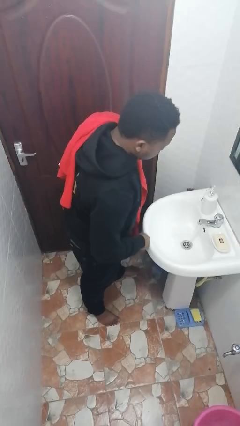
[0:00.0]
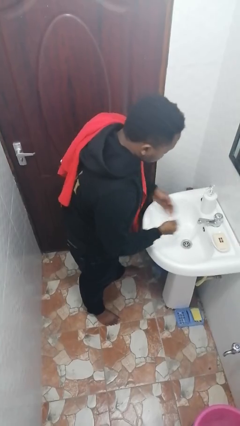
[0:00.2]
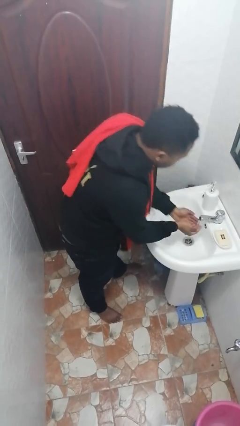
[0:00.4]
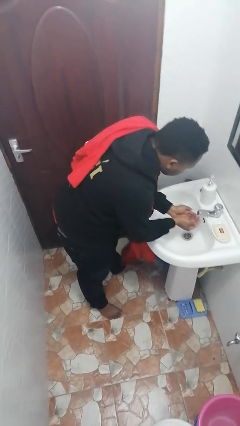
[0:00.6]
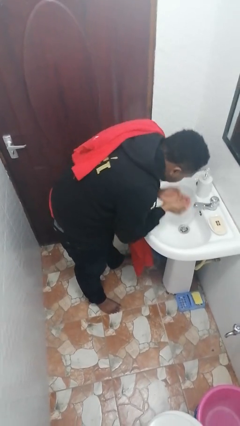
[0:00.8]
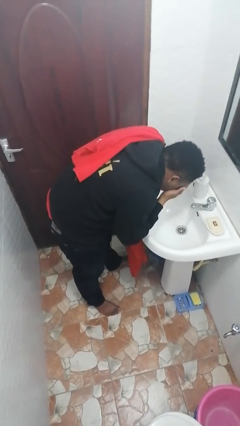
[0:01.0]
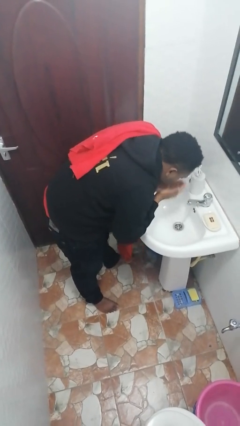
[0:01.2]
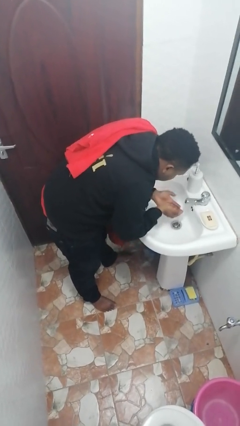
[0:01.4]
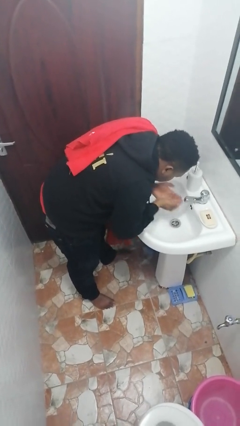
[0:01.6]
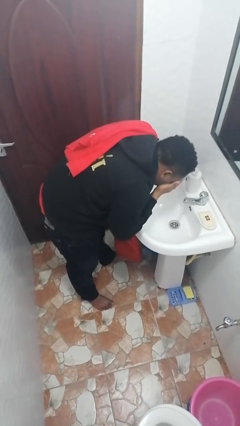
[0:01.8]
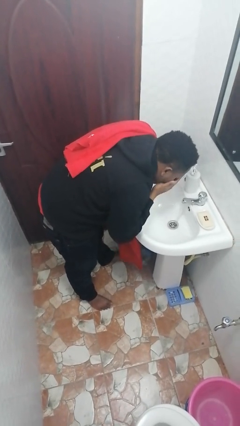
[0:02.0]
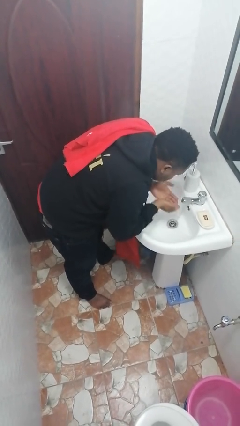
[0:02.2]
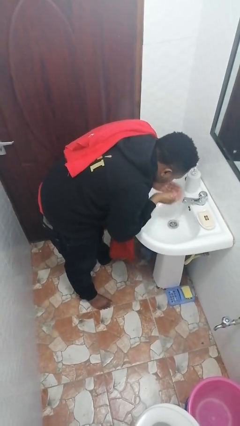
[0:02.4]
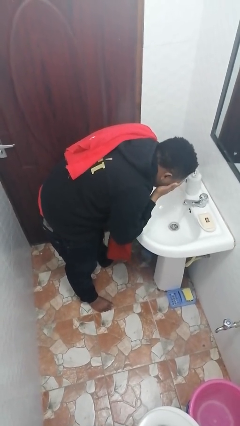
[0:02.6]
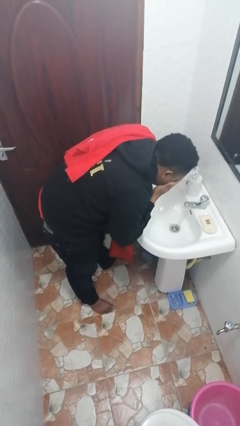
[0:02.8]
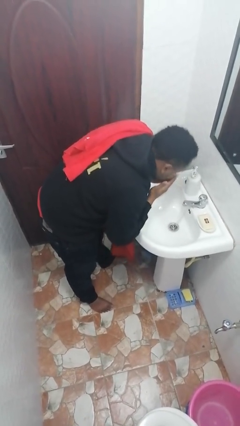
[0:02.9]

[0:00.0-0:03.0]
person washes face

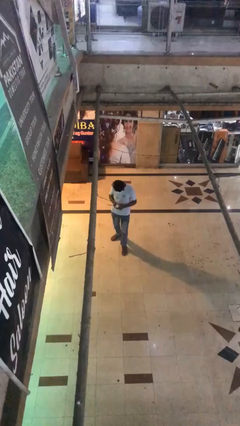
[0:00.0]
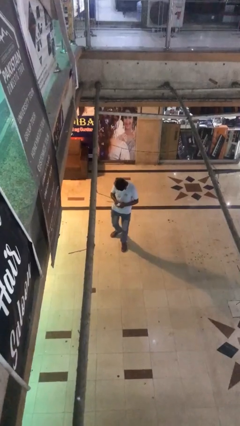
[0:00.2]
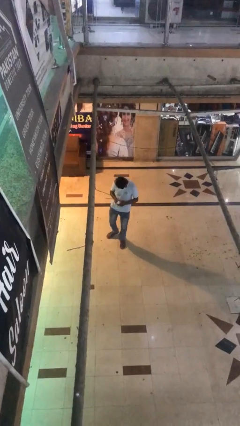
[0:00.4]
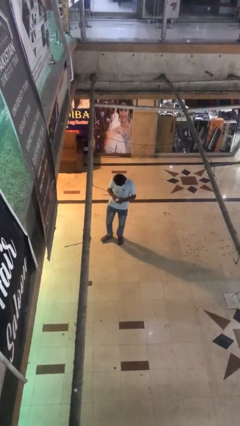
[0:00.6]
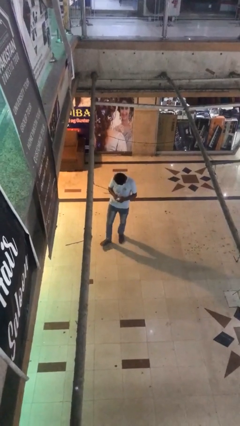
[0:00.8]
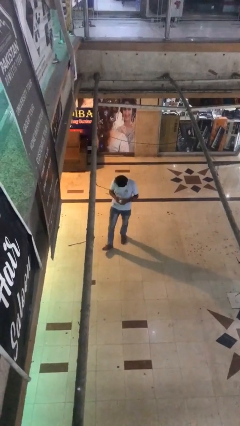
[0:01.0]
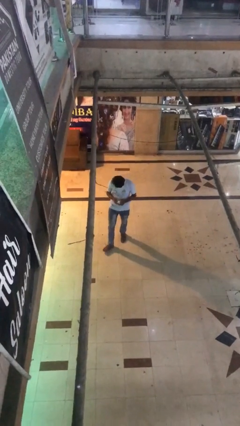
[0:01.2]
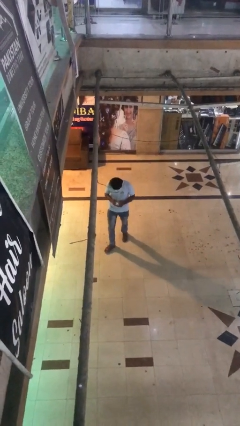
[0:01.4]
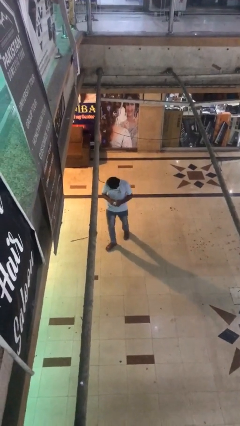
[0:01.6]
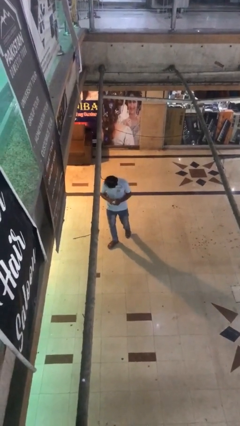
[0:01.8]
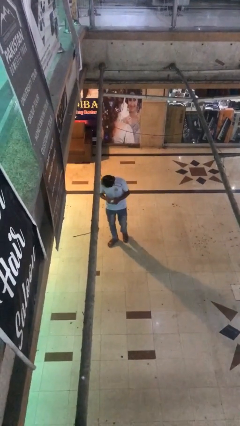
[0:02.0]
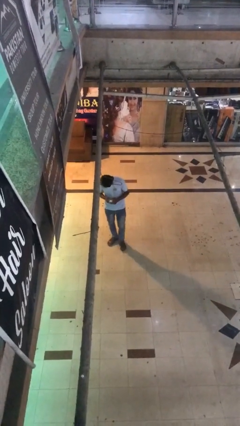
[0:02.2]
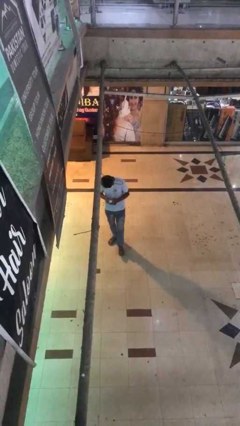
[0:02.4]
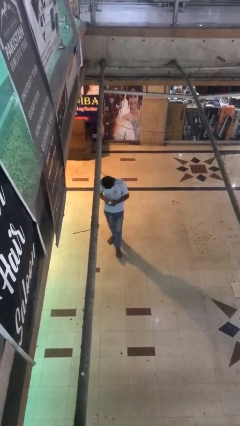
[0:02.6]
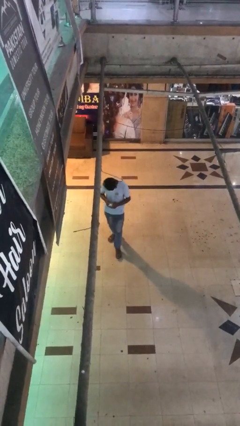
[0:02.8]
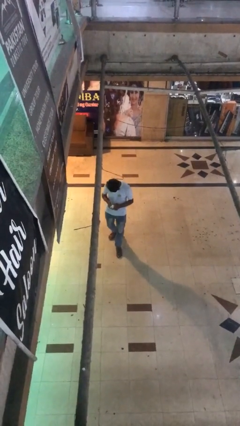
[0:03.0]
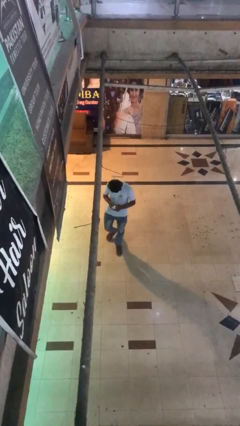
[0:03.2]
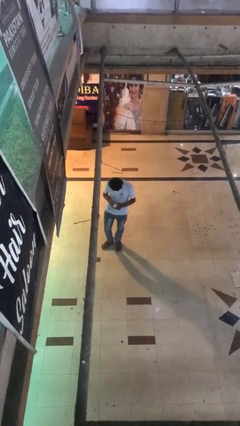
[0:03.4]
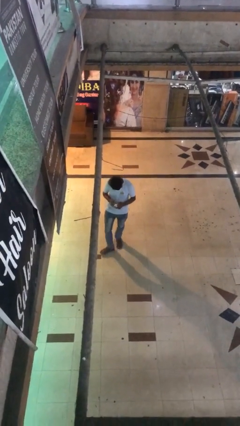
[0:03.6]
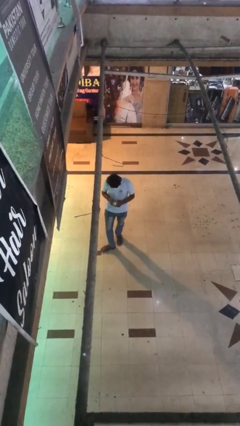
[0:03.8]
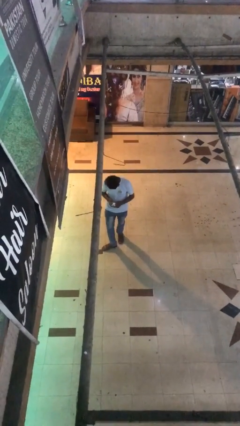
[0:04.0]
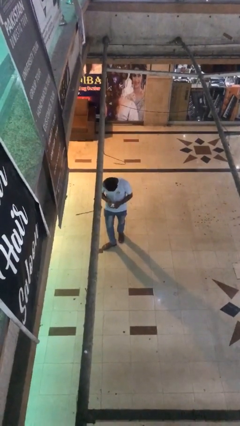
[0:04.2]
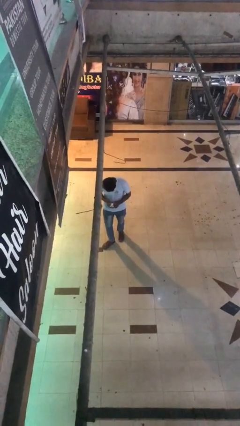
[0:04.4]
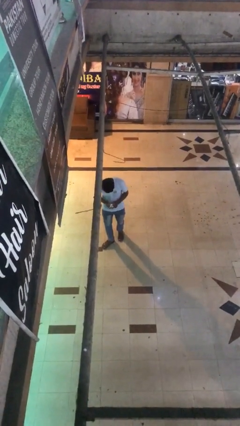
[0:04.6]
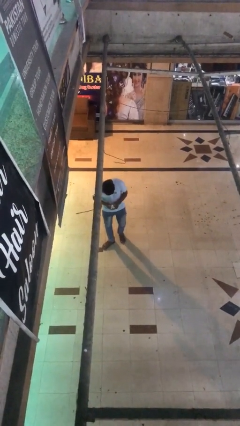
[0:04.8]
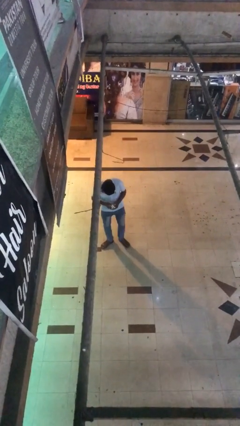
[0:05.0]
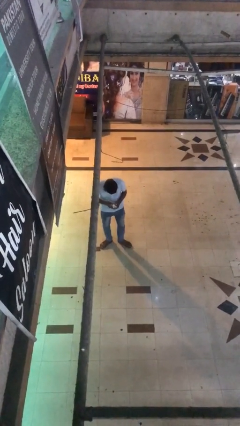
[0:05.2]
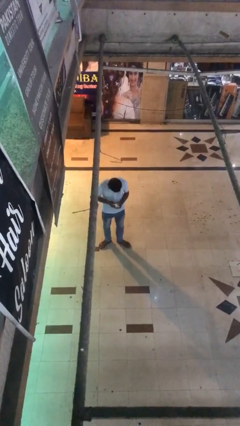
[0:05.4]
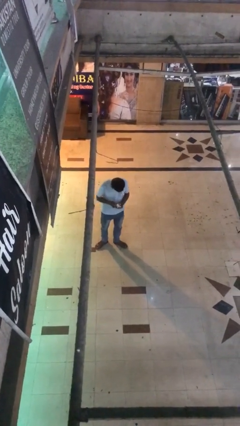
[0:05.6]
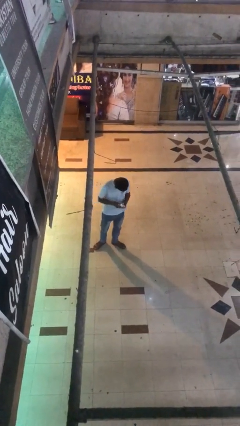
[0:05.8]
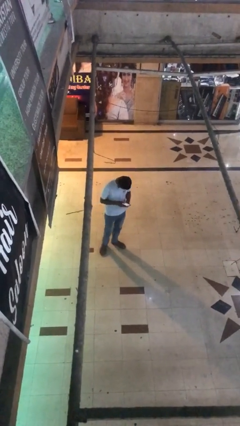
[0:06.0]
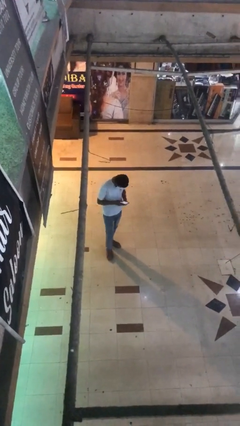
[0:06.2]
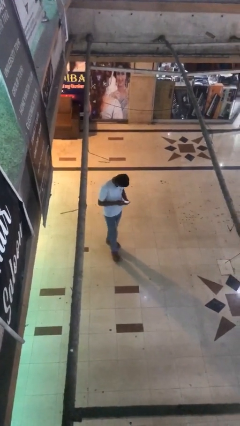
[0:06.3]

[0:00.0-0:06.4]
person texts on phone

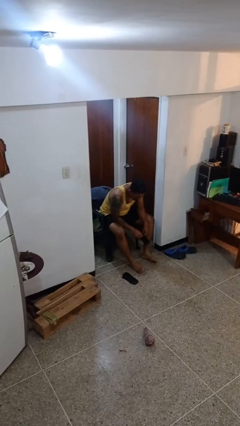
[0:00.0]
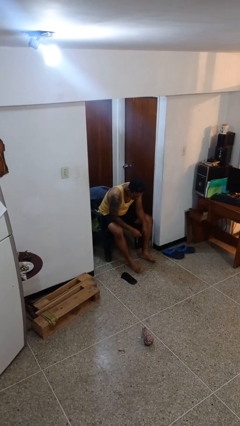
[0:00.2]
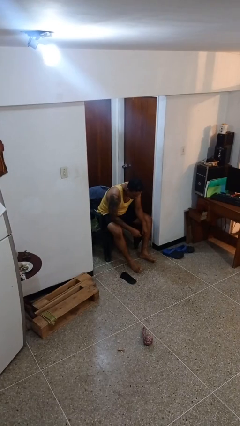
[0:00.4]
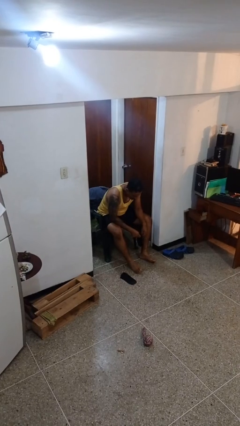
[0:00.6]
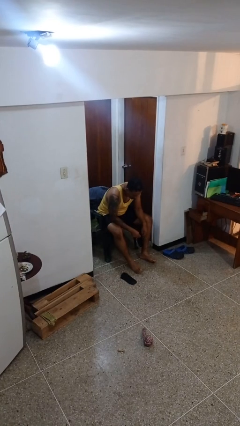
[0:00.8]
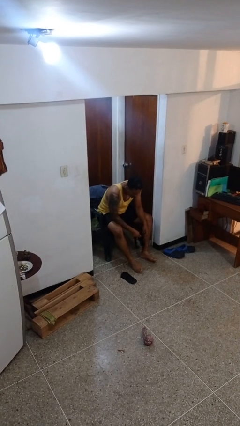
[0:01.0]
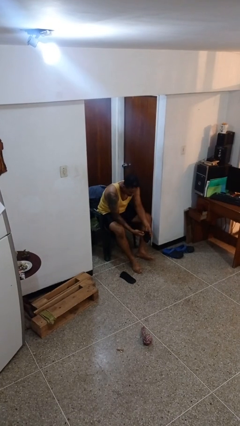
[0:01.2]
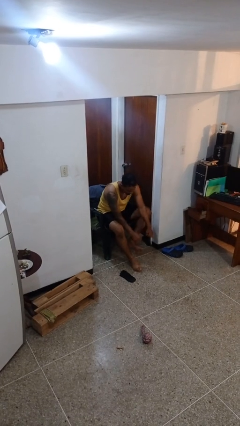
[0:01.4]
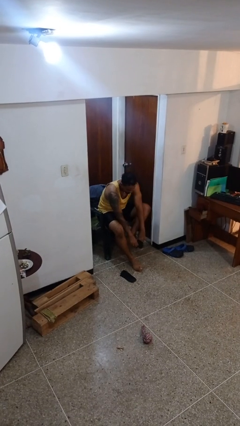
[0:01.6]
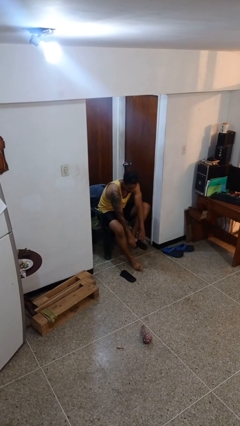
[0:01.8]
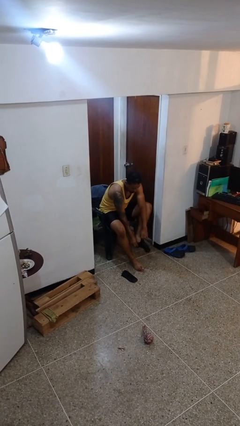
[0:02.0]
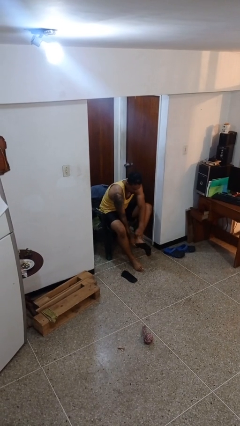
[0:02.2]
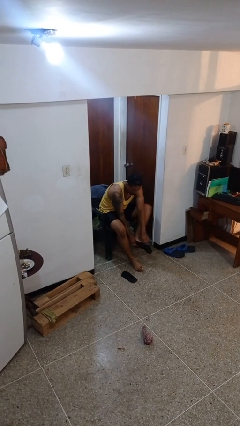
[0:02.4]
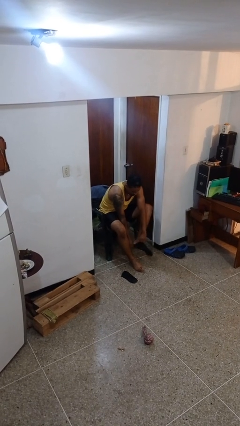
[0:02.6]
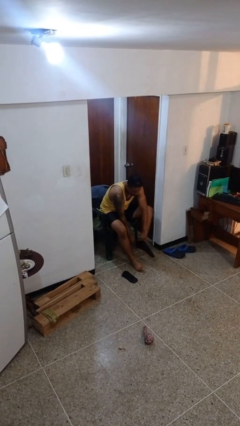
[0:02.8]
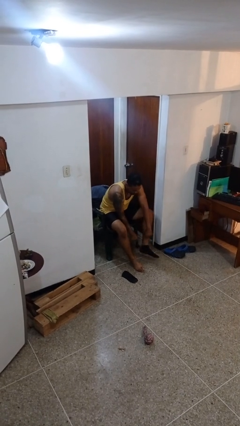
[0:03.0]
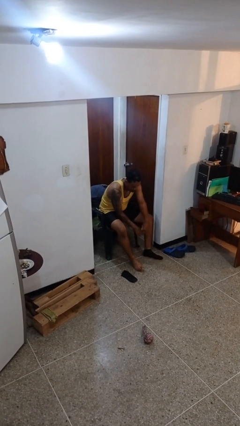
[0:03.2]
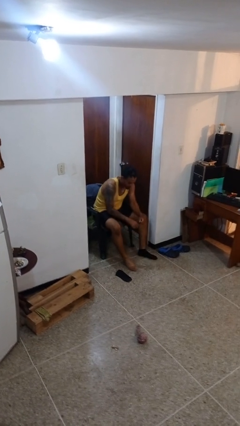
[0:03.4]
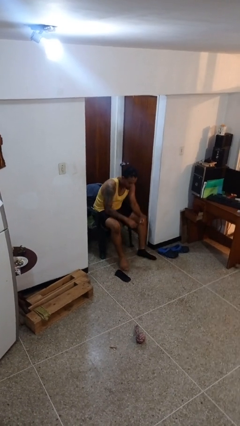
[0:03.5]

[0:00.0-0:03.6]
person puts on socks

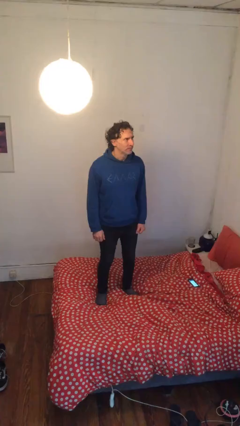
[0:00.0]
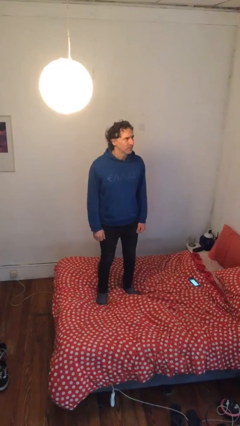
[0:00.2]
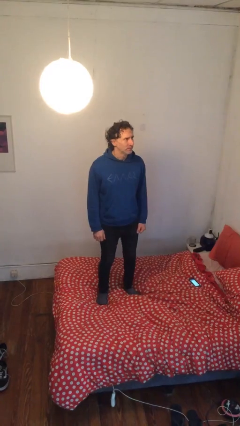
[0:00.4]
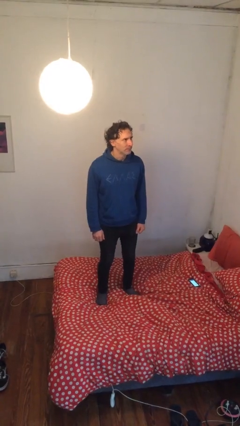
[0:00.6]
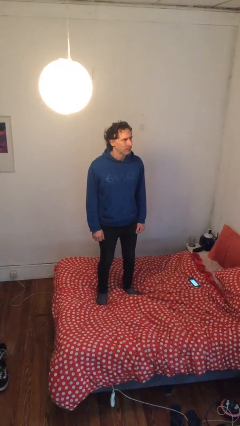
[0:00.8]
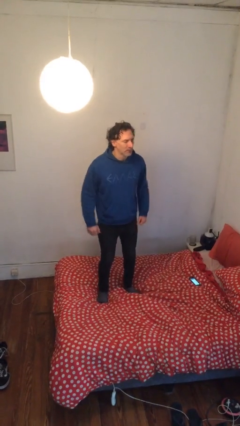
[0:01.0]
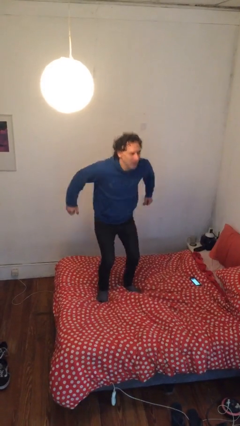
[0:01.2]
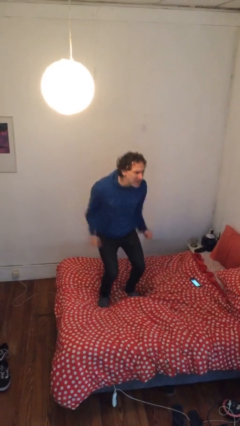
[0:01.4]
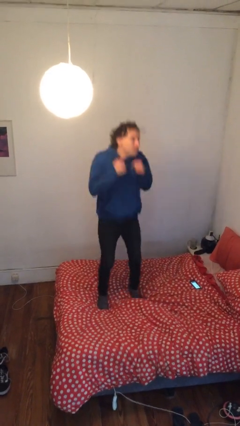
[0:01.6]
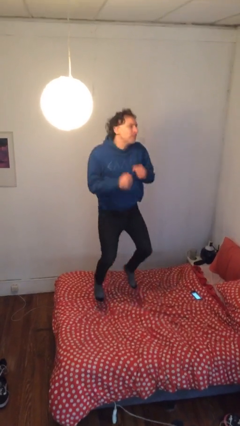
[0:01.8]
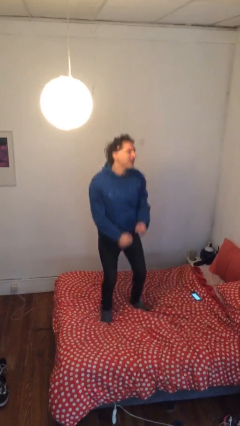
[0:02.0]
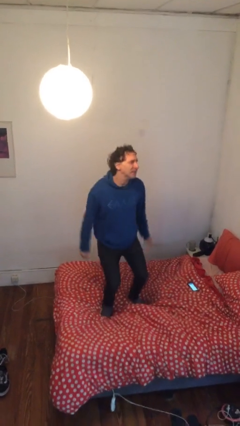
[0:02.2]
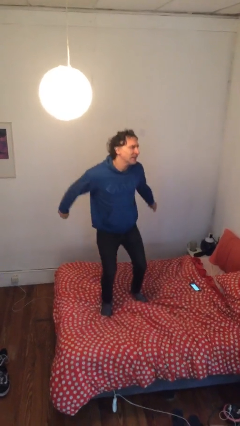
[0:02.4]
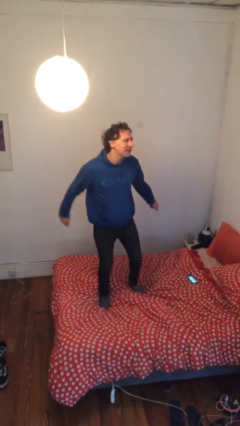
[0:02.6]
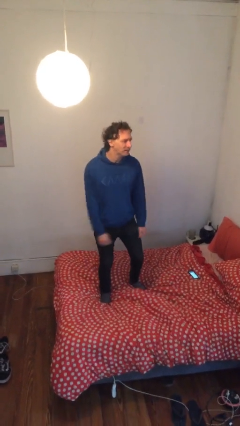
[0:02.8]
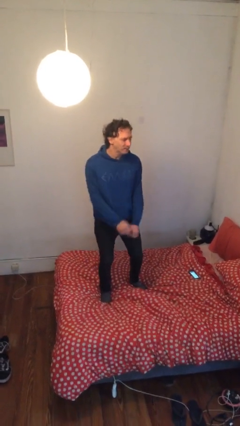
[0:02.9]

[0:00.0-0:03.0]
person jumps on bed

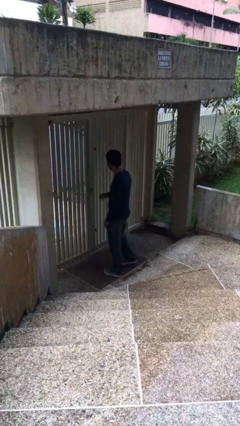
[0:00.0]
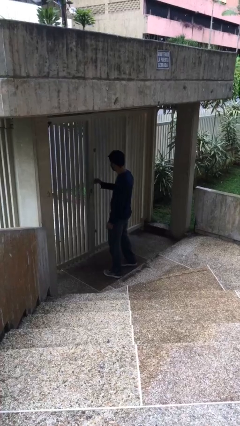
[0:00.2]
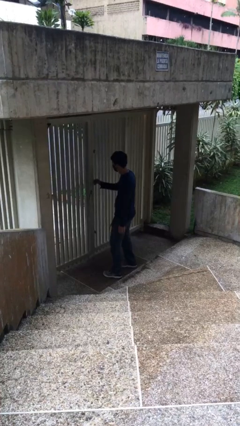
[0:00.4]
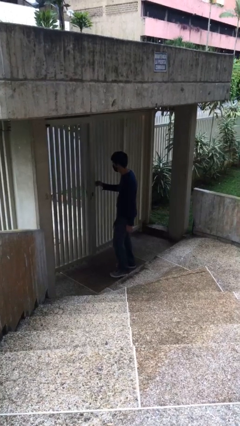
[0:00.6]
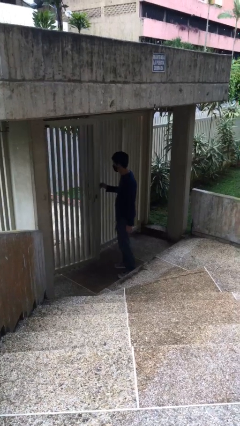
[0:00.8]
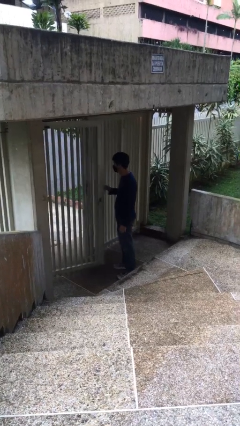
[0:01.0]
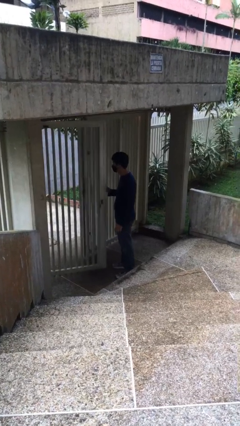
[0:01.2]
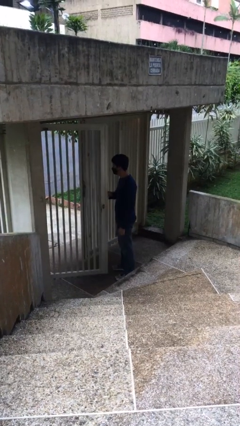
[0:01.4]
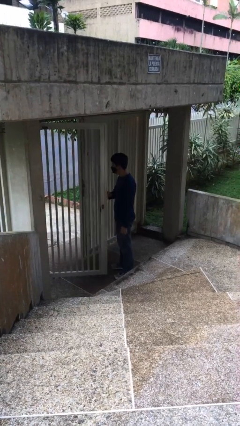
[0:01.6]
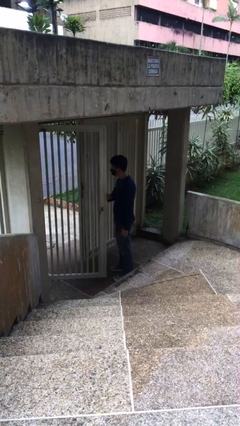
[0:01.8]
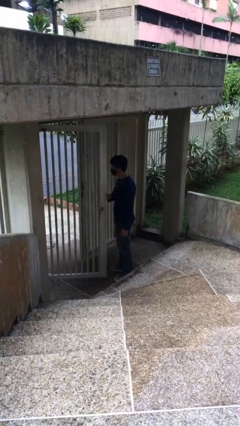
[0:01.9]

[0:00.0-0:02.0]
person opens facility door
